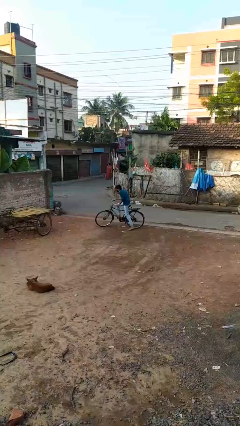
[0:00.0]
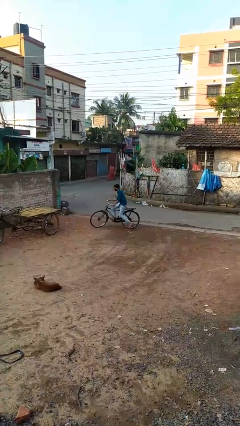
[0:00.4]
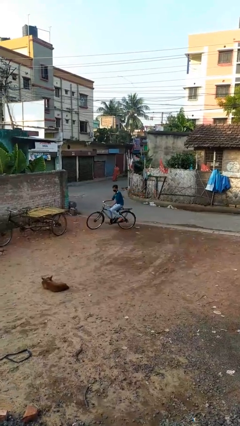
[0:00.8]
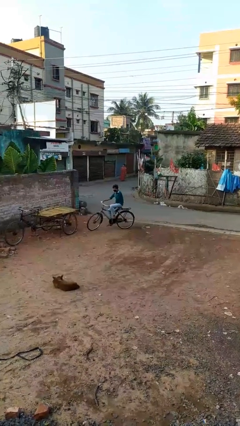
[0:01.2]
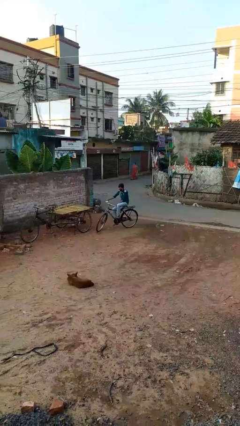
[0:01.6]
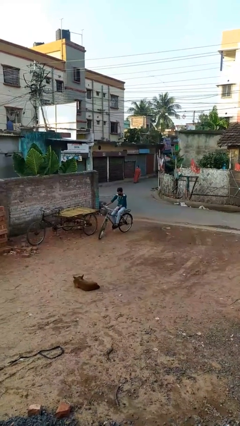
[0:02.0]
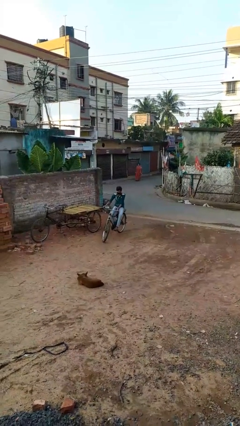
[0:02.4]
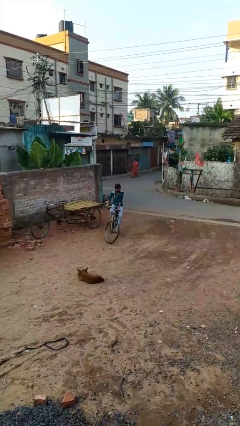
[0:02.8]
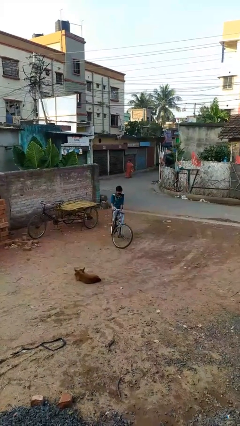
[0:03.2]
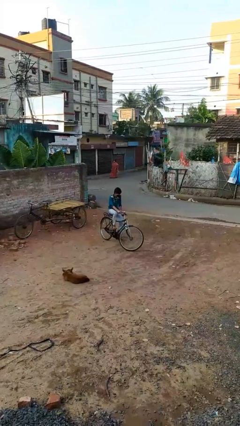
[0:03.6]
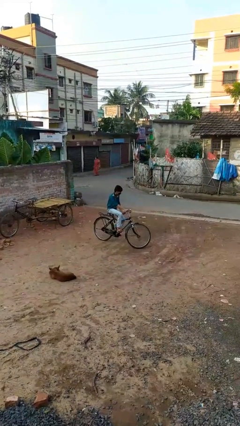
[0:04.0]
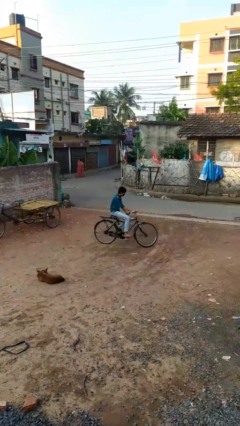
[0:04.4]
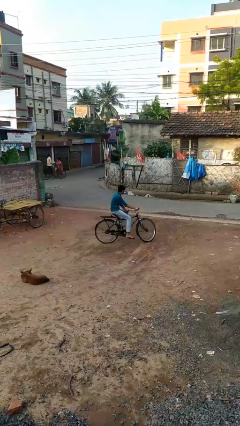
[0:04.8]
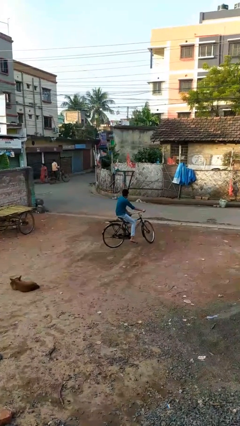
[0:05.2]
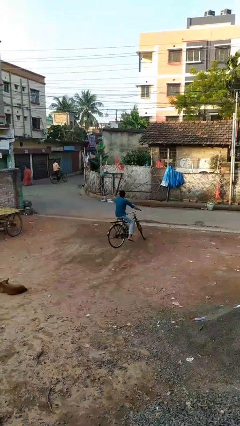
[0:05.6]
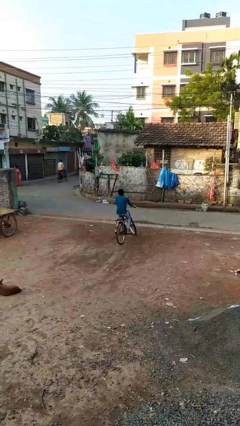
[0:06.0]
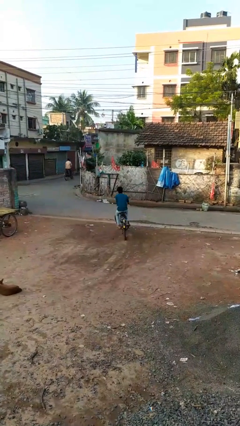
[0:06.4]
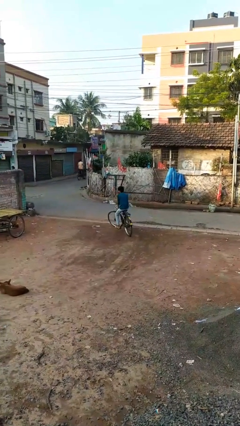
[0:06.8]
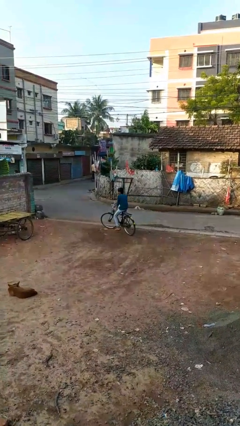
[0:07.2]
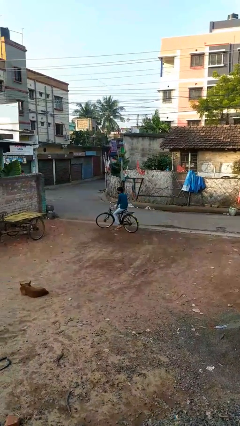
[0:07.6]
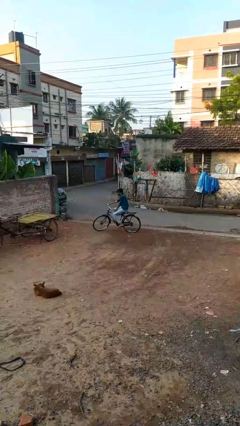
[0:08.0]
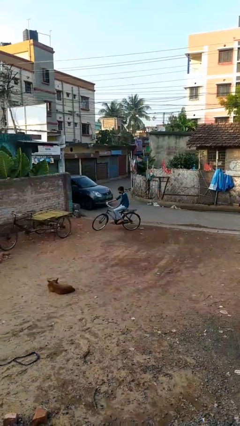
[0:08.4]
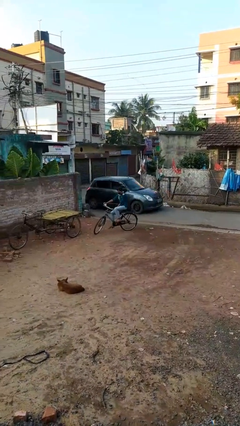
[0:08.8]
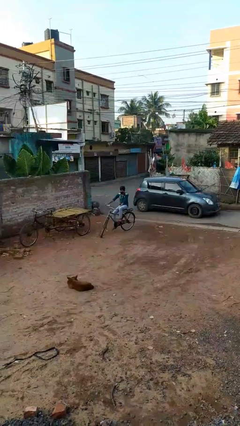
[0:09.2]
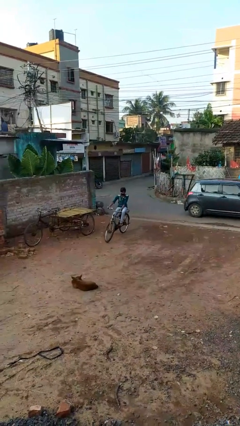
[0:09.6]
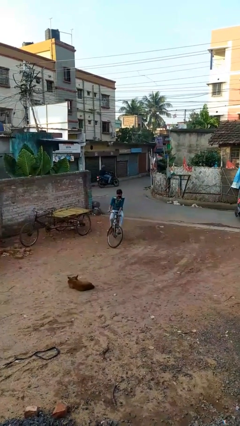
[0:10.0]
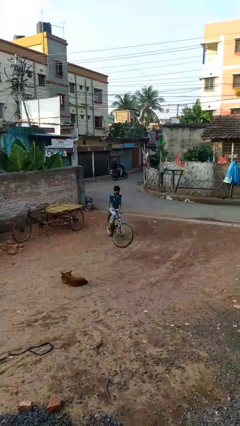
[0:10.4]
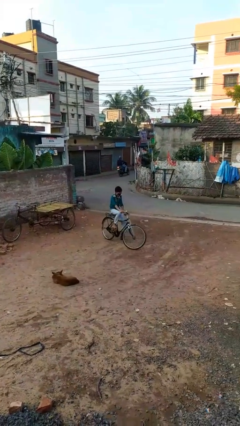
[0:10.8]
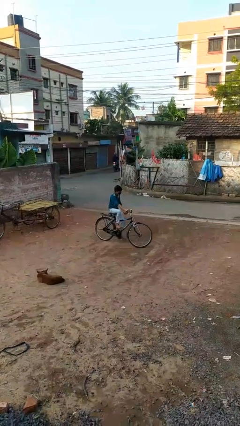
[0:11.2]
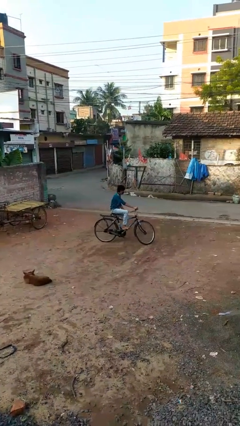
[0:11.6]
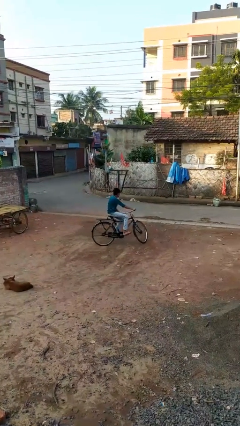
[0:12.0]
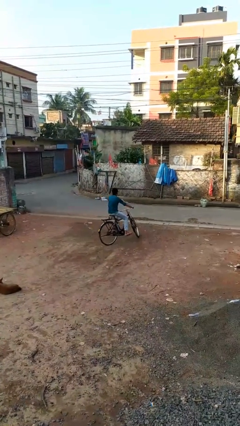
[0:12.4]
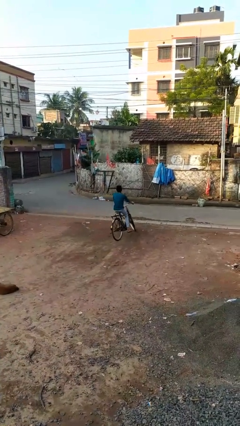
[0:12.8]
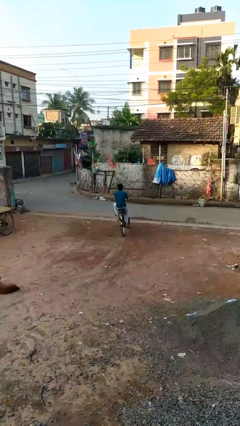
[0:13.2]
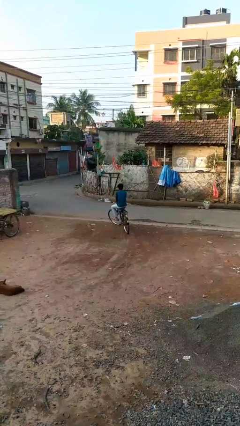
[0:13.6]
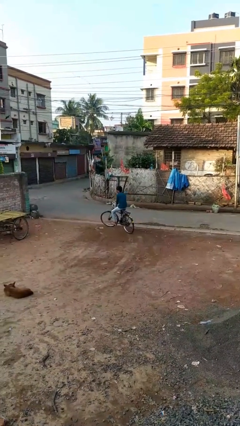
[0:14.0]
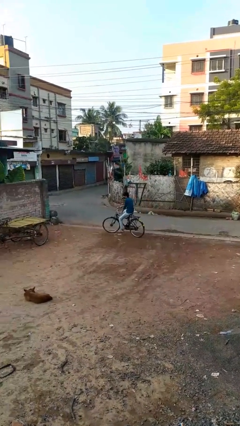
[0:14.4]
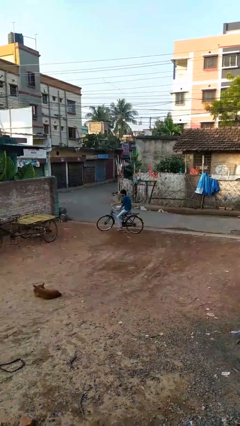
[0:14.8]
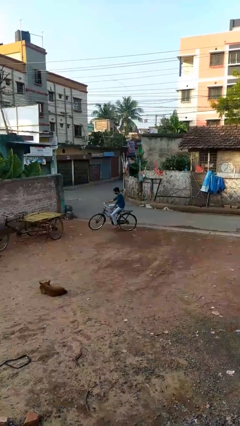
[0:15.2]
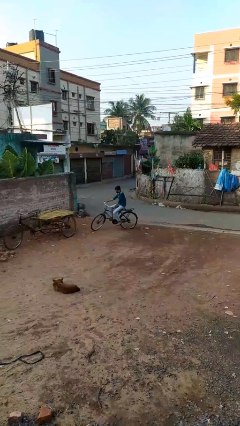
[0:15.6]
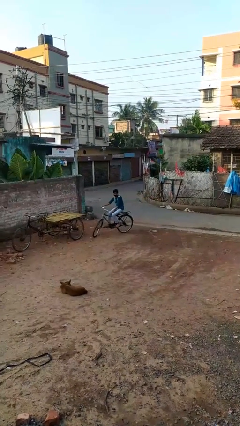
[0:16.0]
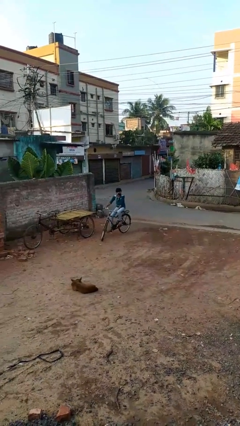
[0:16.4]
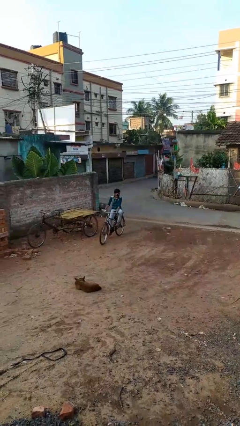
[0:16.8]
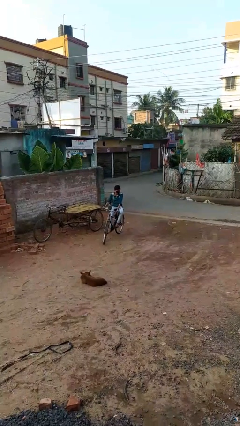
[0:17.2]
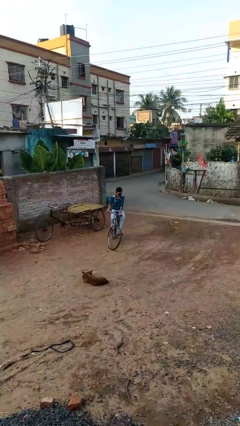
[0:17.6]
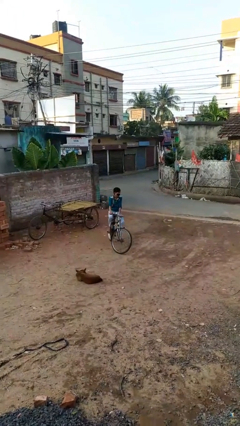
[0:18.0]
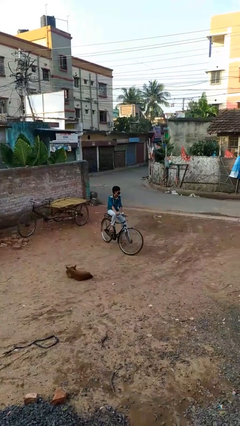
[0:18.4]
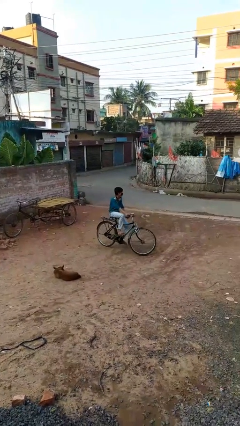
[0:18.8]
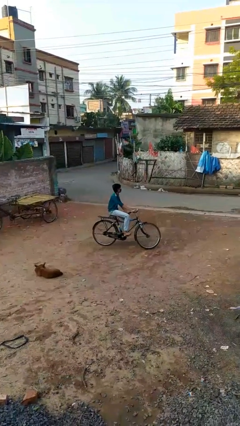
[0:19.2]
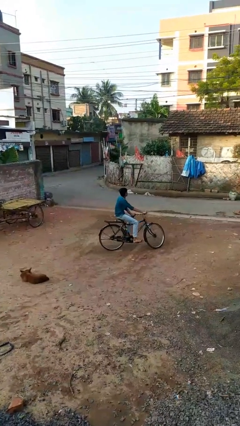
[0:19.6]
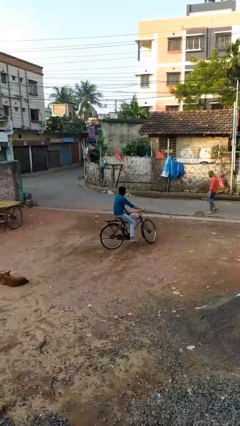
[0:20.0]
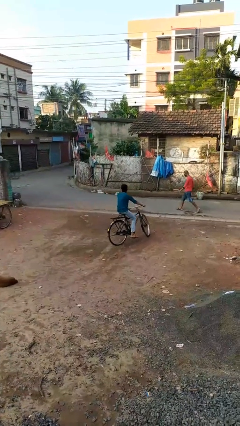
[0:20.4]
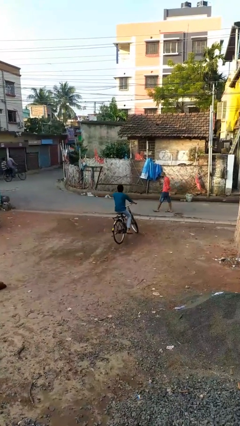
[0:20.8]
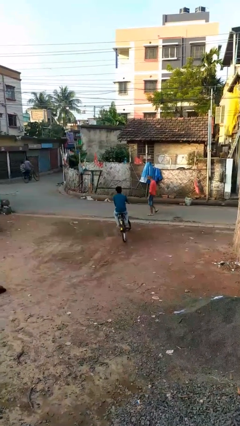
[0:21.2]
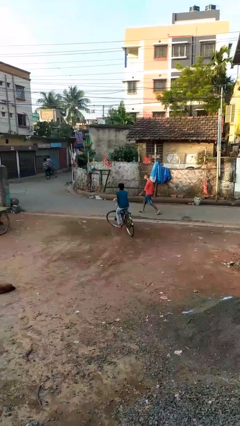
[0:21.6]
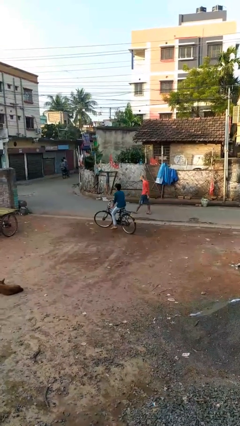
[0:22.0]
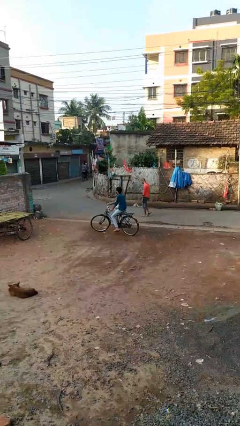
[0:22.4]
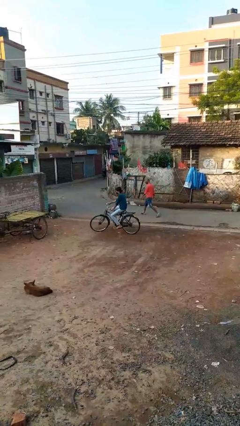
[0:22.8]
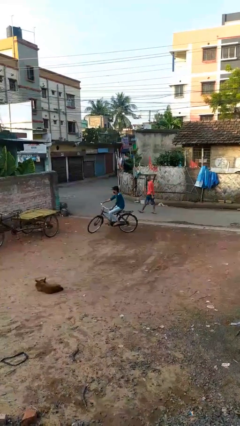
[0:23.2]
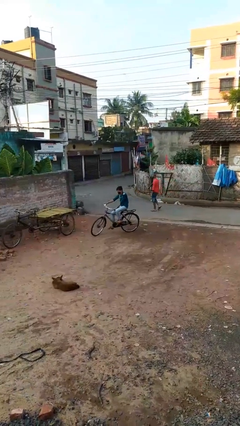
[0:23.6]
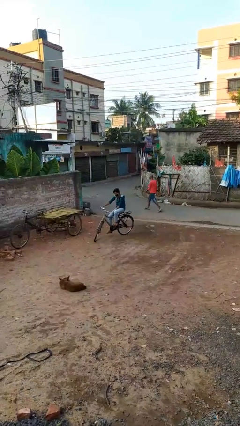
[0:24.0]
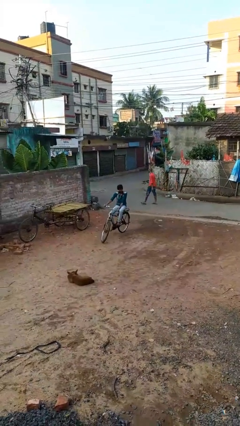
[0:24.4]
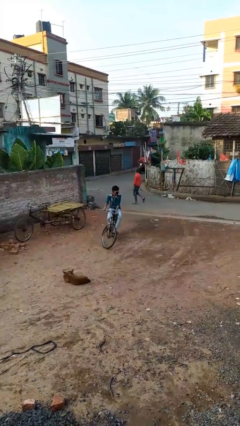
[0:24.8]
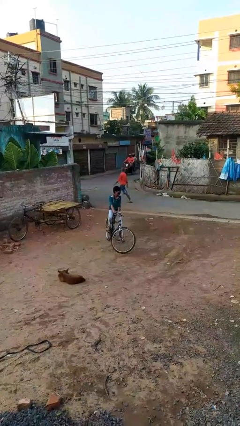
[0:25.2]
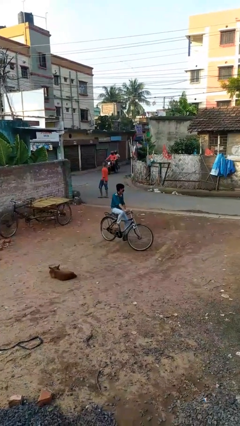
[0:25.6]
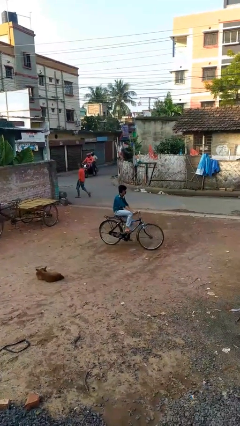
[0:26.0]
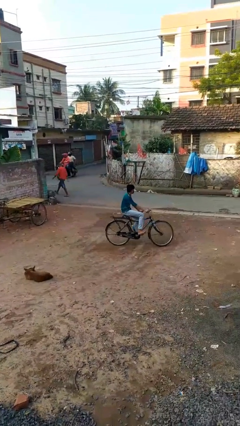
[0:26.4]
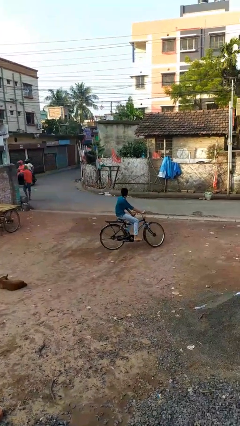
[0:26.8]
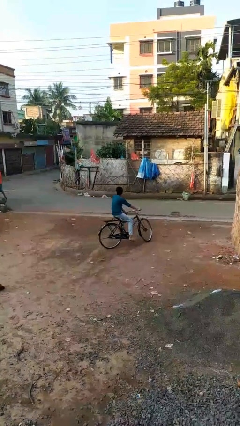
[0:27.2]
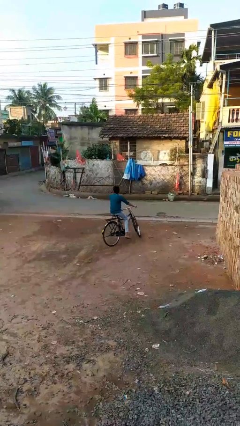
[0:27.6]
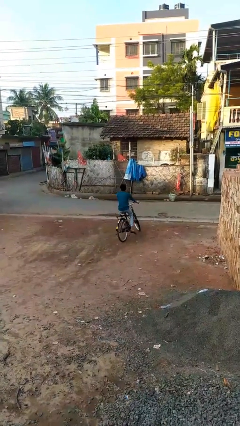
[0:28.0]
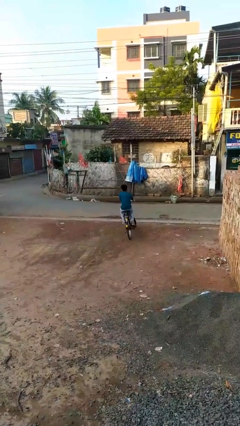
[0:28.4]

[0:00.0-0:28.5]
person rides bicycle

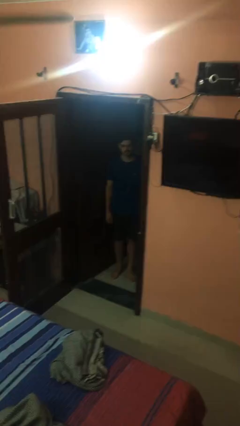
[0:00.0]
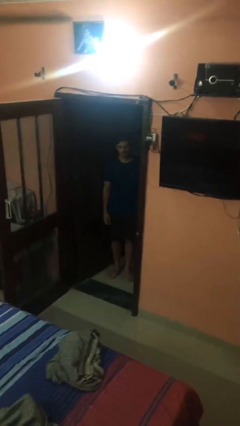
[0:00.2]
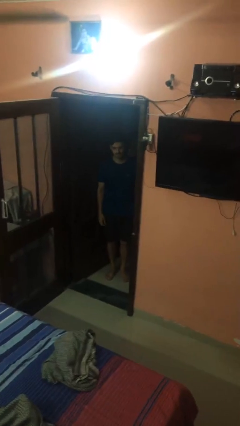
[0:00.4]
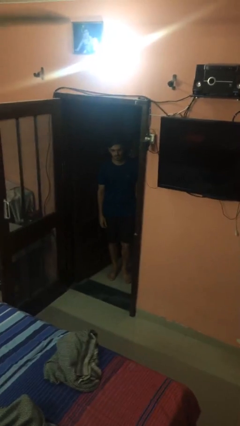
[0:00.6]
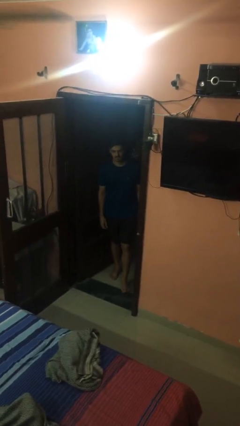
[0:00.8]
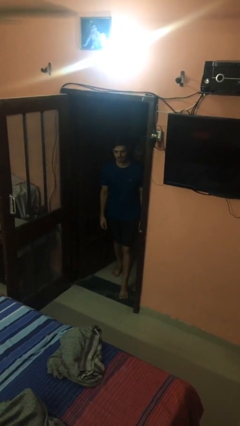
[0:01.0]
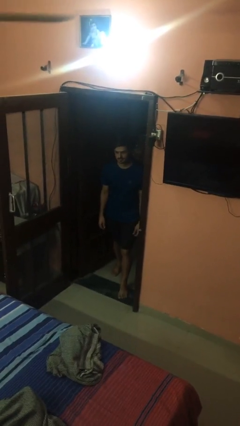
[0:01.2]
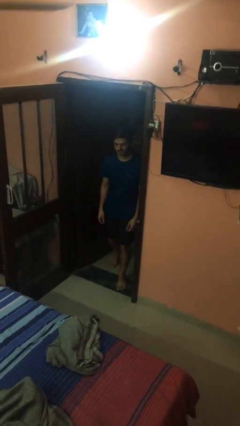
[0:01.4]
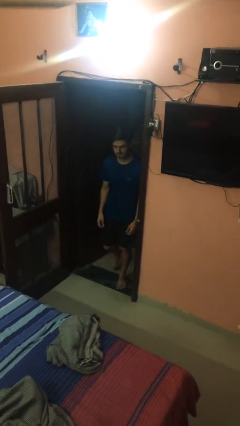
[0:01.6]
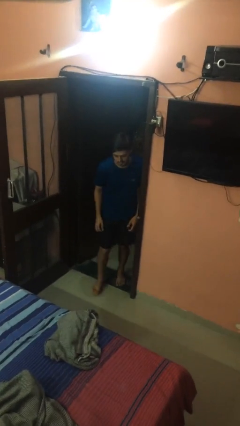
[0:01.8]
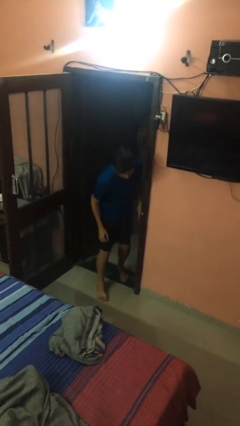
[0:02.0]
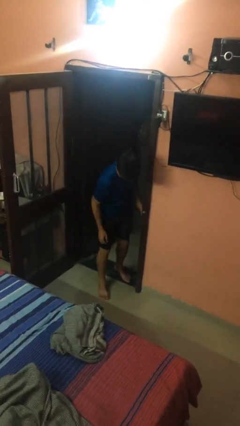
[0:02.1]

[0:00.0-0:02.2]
person bumps into wall

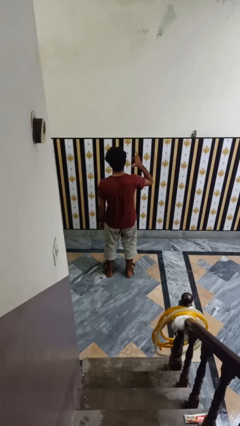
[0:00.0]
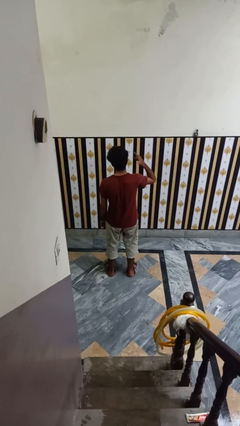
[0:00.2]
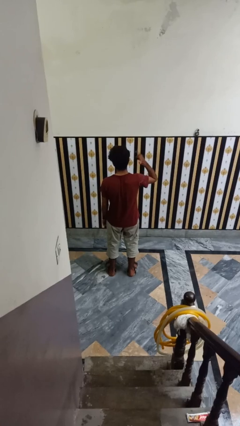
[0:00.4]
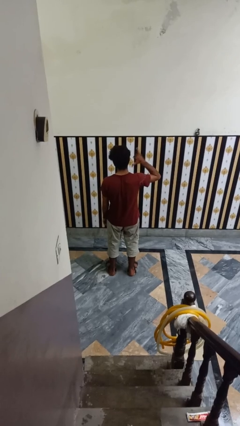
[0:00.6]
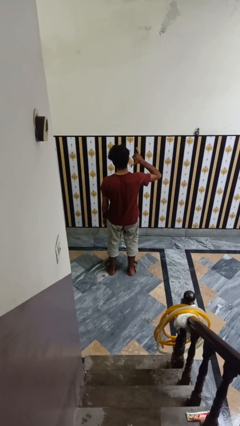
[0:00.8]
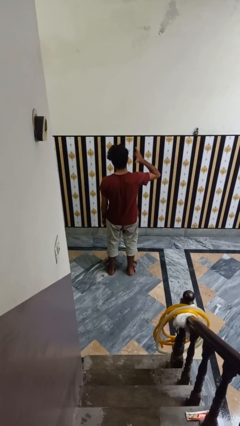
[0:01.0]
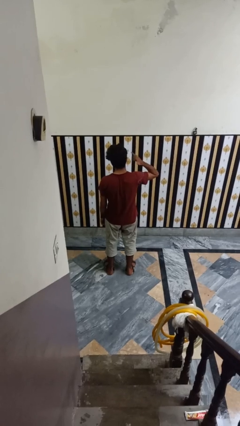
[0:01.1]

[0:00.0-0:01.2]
person gestures hang loose

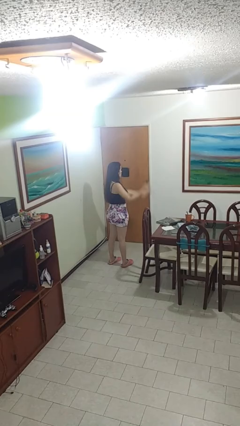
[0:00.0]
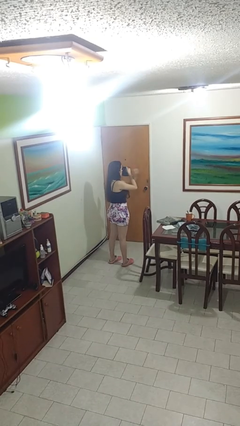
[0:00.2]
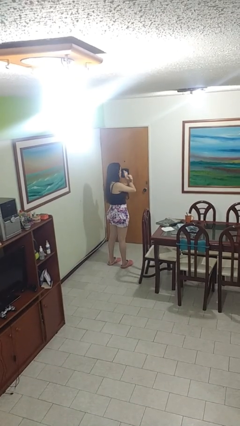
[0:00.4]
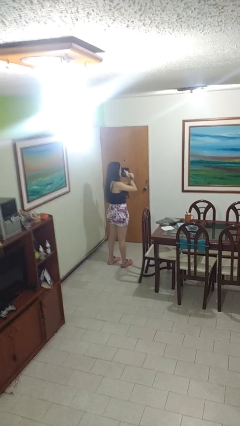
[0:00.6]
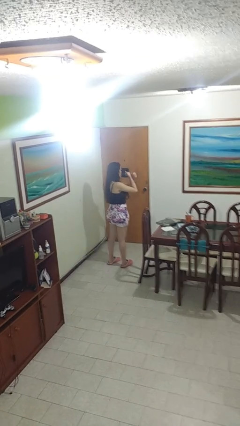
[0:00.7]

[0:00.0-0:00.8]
person gestures arms x
